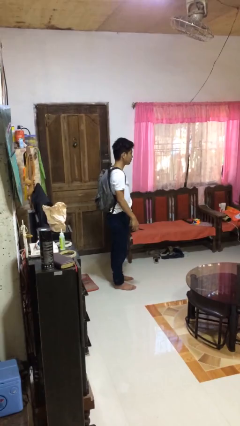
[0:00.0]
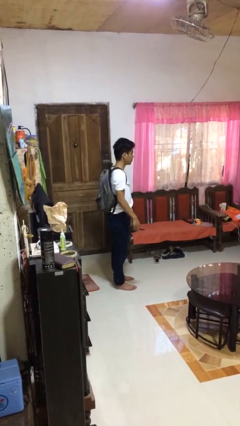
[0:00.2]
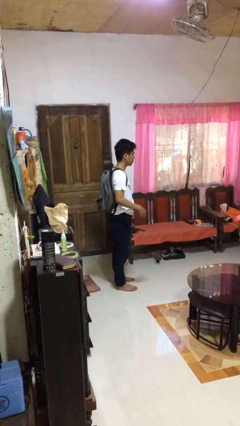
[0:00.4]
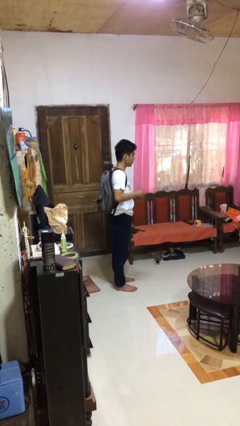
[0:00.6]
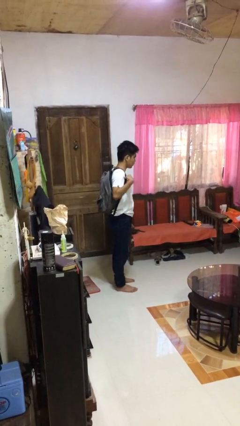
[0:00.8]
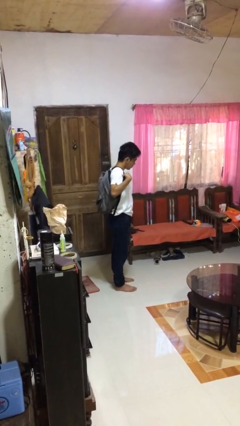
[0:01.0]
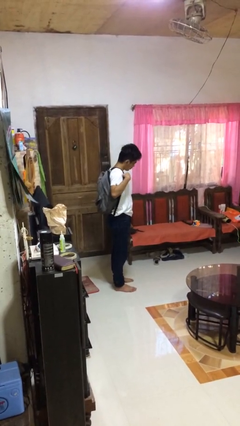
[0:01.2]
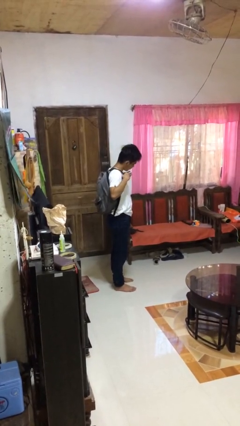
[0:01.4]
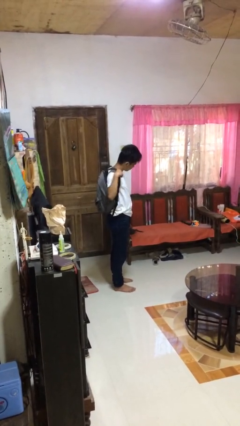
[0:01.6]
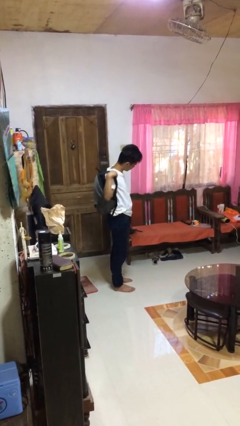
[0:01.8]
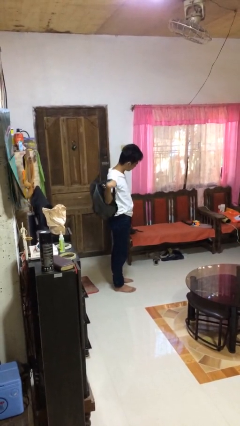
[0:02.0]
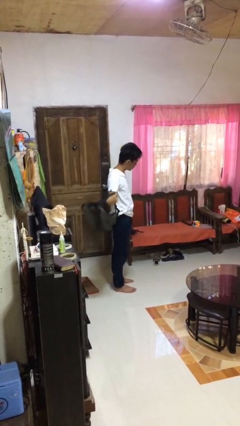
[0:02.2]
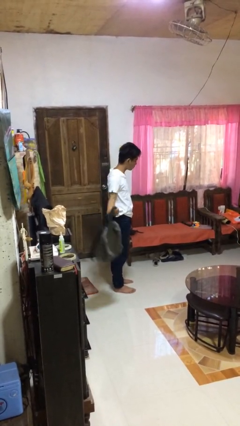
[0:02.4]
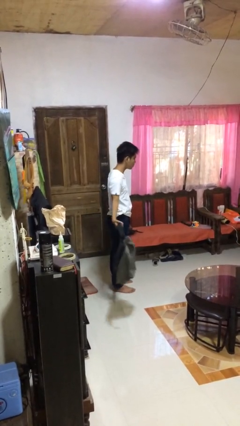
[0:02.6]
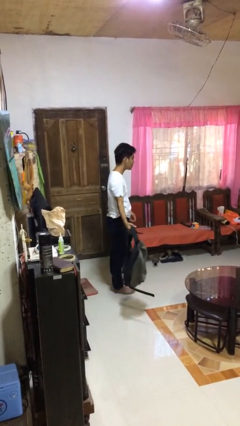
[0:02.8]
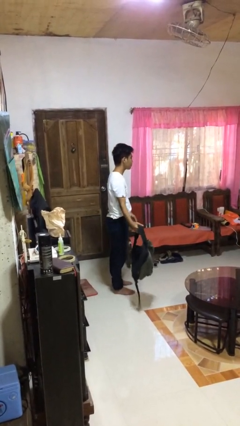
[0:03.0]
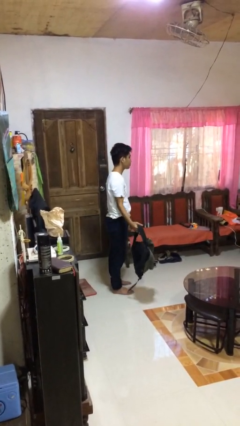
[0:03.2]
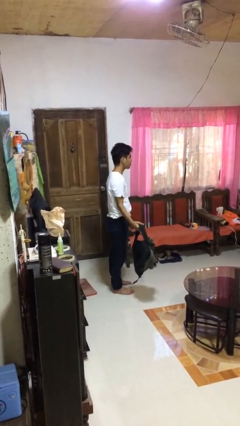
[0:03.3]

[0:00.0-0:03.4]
person takes off backpack

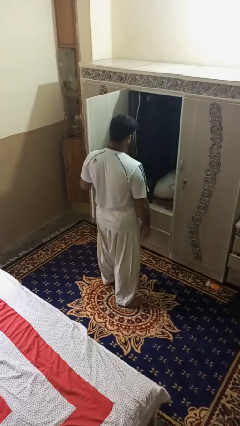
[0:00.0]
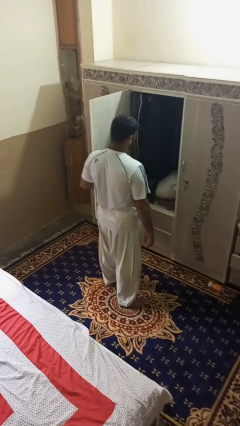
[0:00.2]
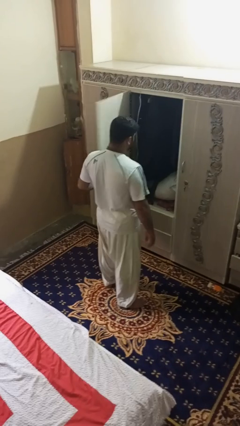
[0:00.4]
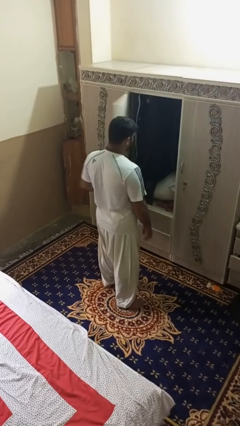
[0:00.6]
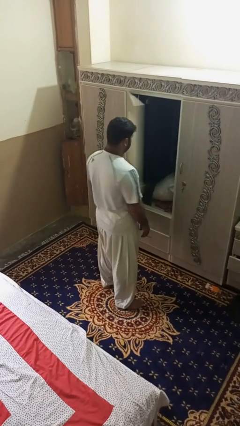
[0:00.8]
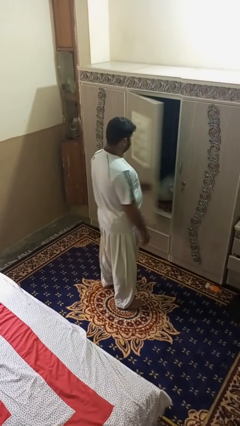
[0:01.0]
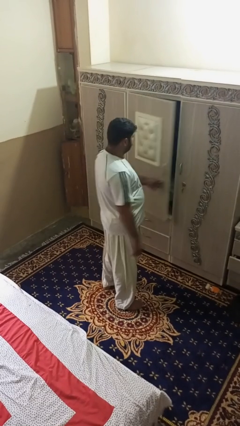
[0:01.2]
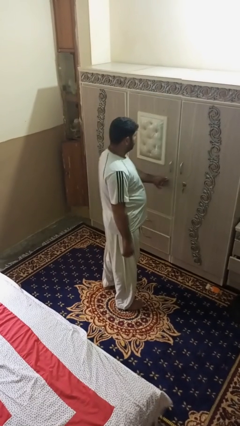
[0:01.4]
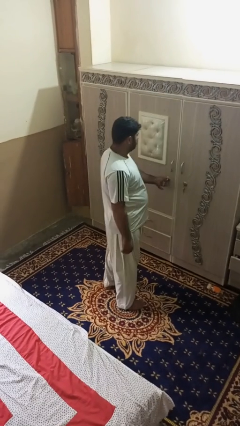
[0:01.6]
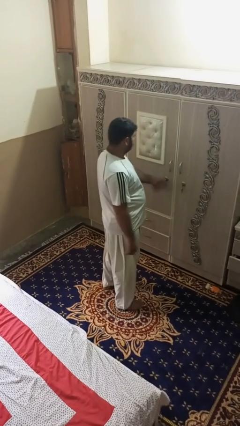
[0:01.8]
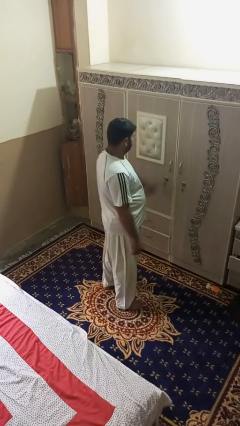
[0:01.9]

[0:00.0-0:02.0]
person closes dresser drawer

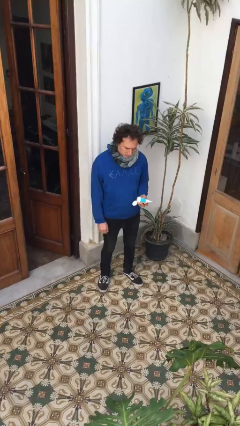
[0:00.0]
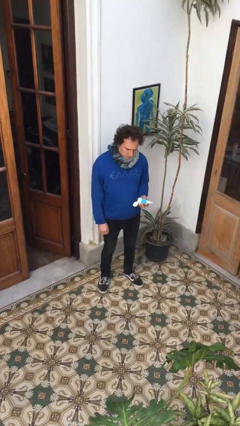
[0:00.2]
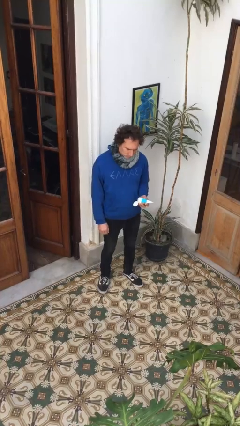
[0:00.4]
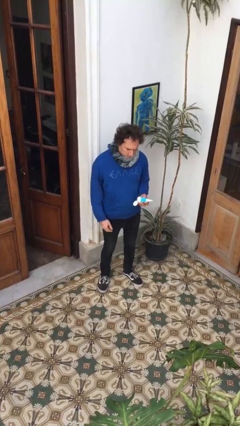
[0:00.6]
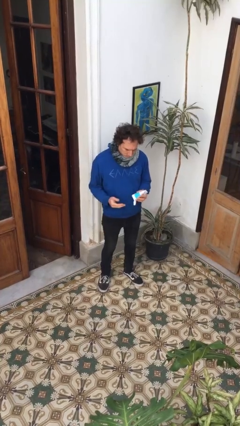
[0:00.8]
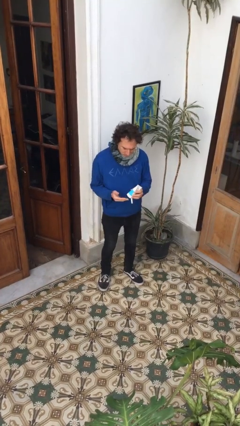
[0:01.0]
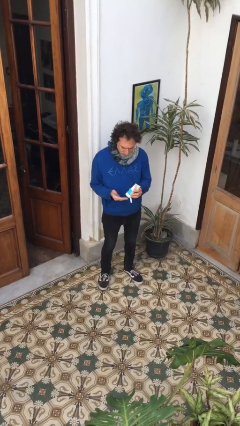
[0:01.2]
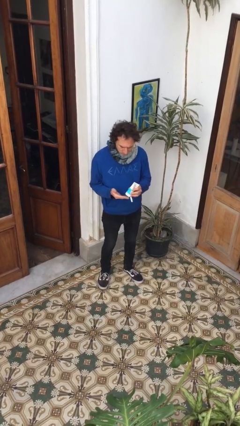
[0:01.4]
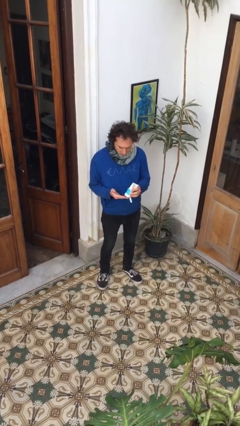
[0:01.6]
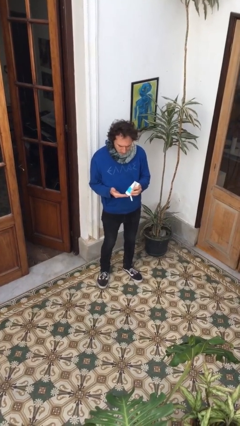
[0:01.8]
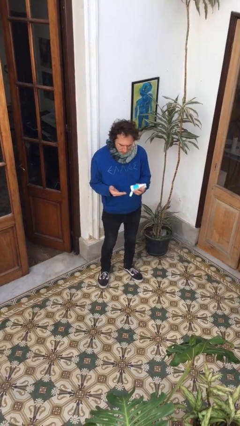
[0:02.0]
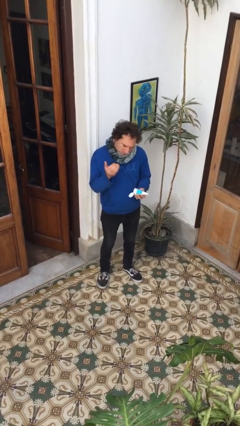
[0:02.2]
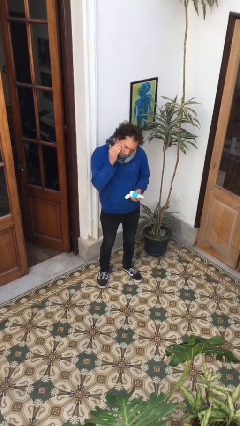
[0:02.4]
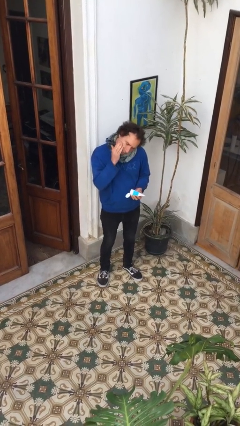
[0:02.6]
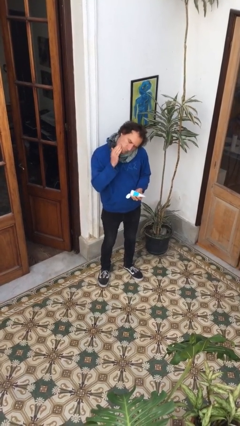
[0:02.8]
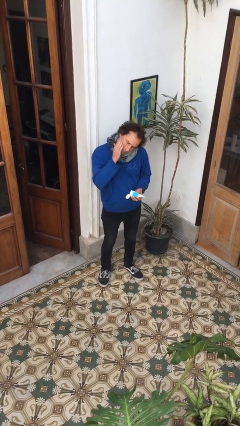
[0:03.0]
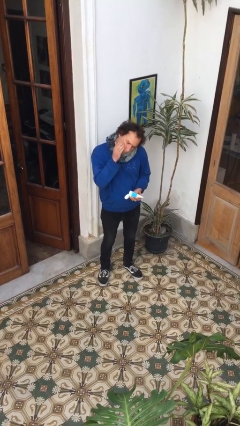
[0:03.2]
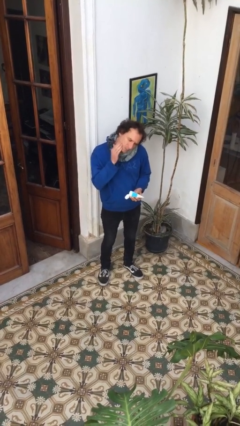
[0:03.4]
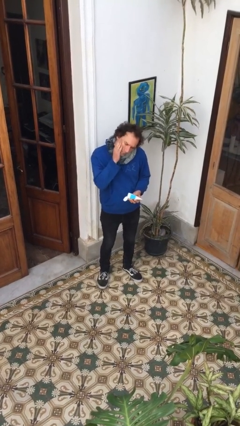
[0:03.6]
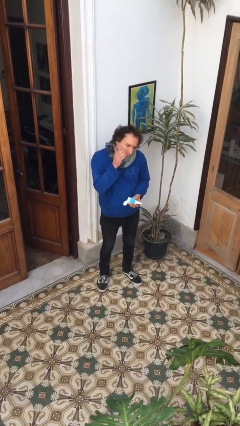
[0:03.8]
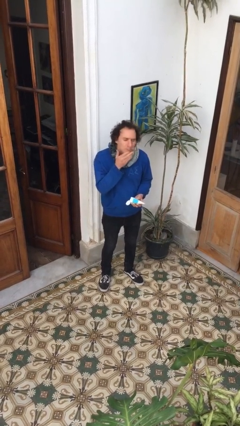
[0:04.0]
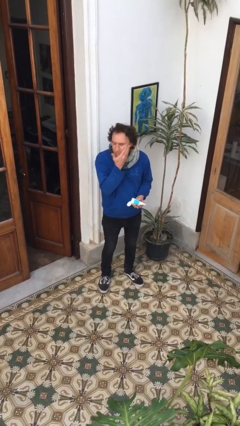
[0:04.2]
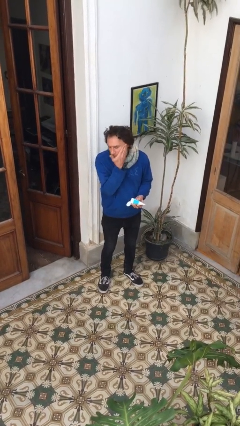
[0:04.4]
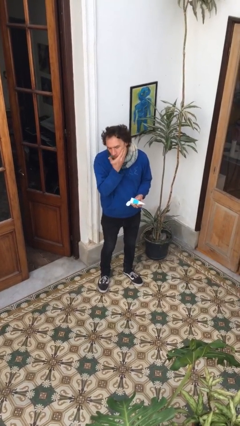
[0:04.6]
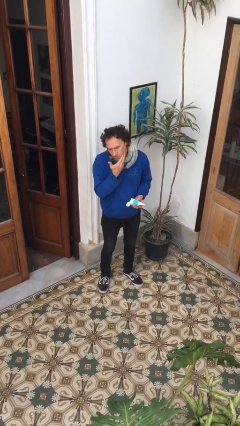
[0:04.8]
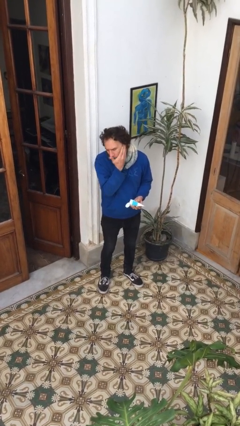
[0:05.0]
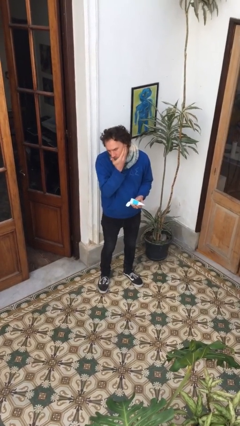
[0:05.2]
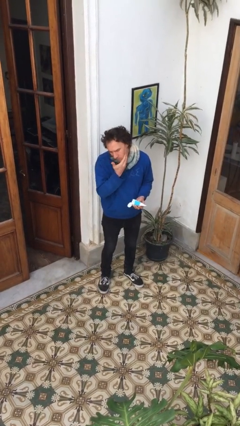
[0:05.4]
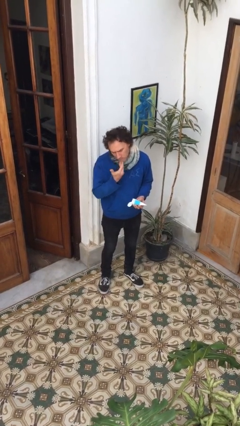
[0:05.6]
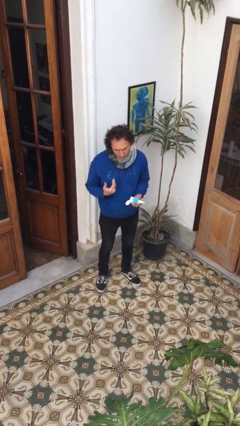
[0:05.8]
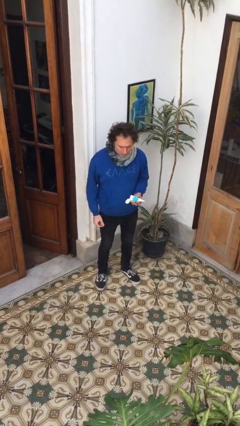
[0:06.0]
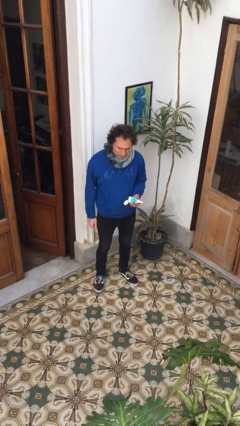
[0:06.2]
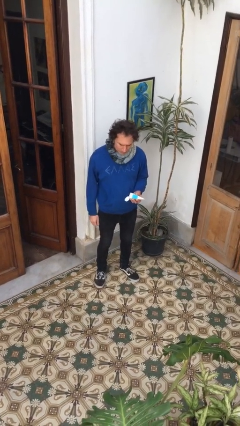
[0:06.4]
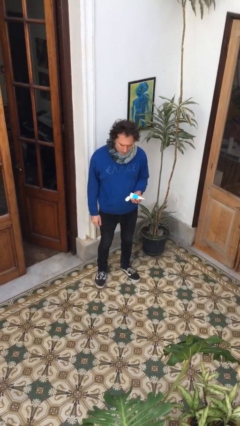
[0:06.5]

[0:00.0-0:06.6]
person applies facial moisturizer

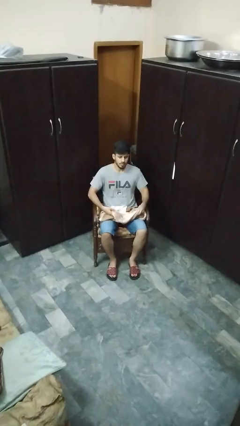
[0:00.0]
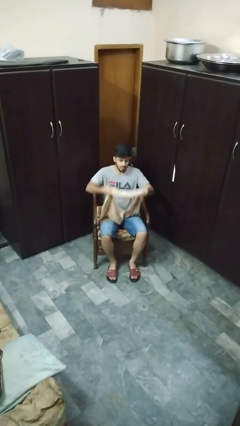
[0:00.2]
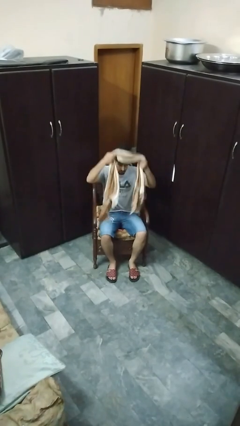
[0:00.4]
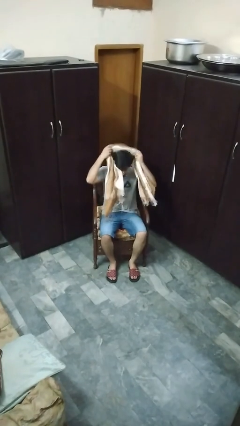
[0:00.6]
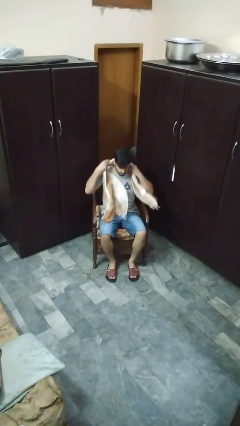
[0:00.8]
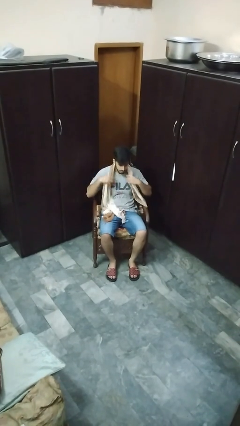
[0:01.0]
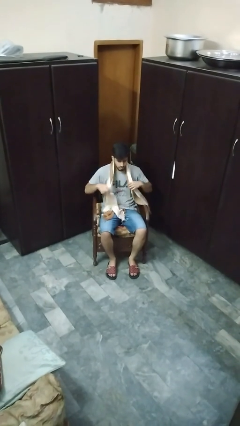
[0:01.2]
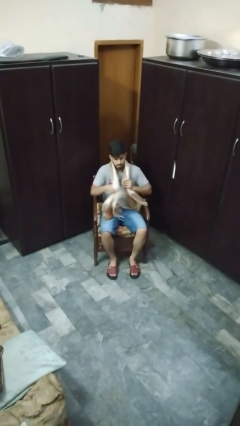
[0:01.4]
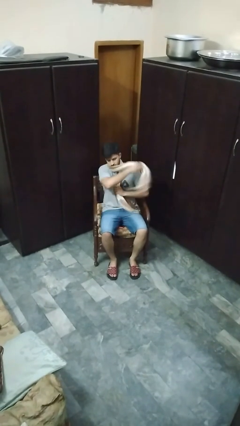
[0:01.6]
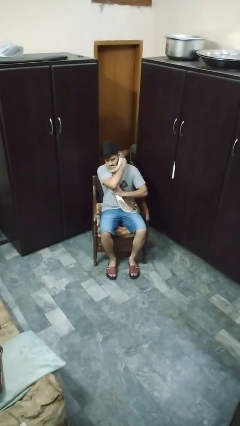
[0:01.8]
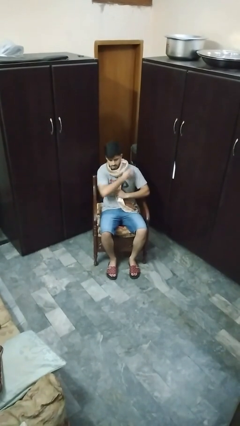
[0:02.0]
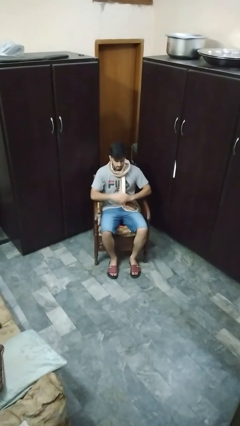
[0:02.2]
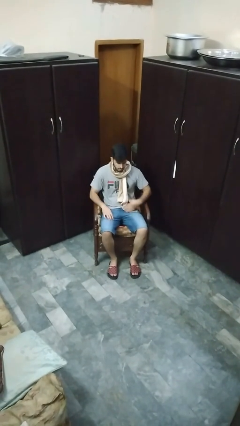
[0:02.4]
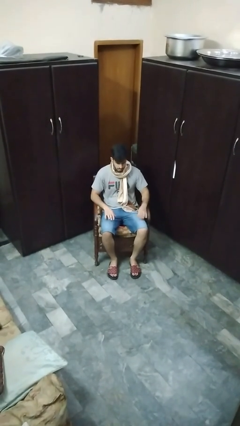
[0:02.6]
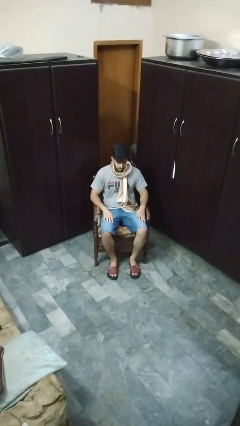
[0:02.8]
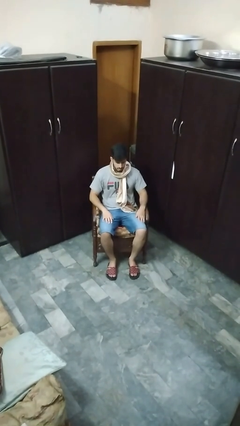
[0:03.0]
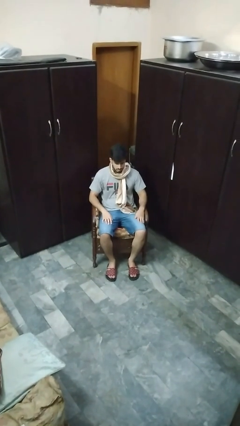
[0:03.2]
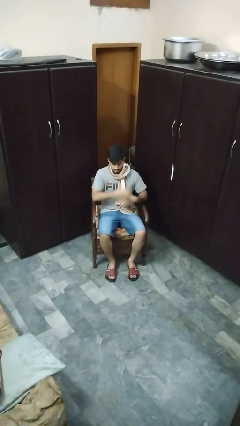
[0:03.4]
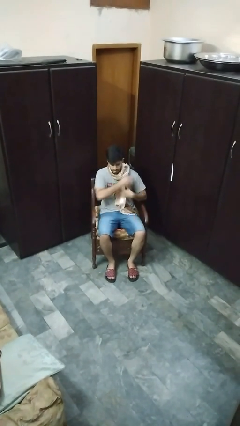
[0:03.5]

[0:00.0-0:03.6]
person puts on scarf

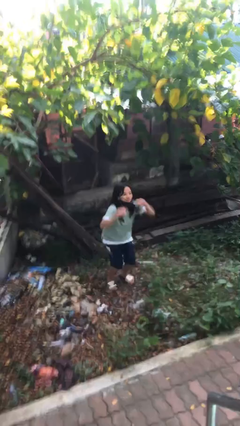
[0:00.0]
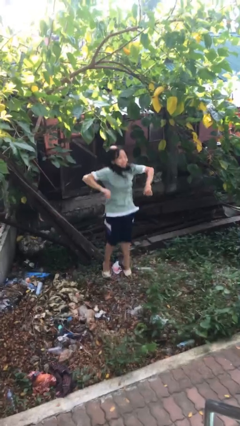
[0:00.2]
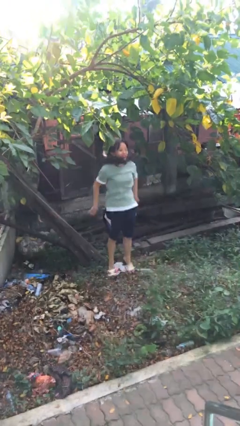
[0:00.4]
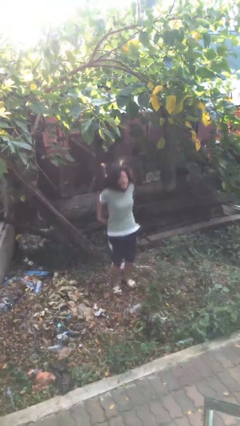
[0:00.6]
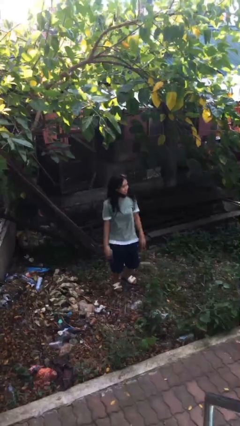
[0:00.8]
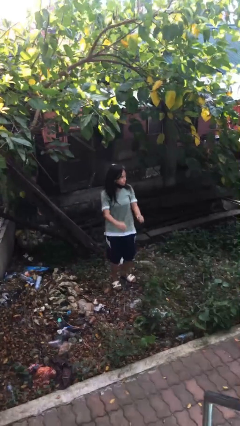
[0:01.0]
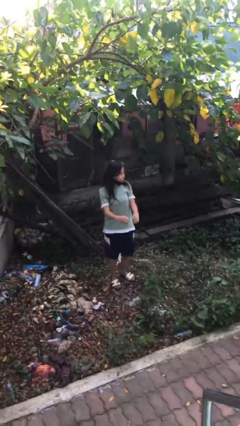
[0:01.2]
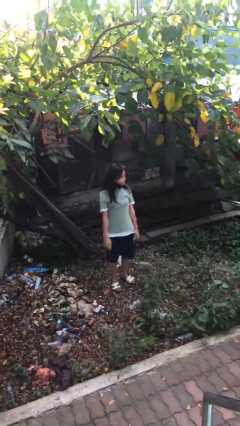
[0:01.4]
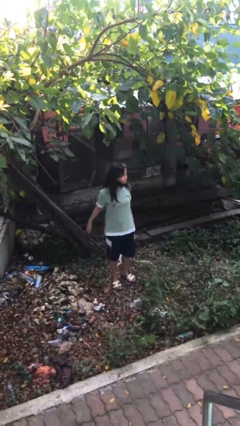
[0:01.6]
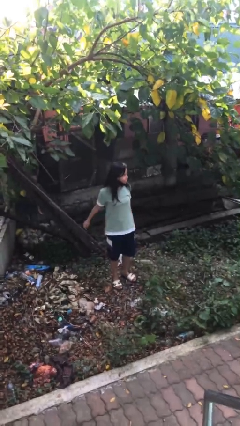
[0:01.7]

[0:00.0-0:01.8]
person jumps

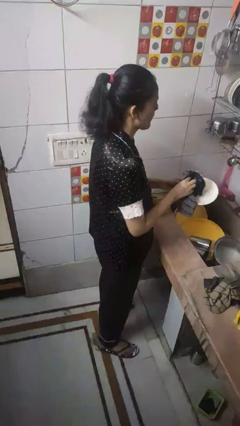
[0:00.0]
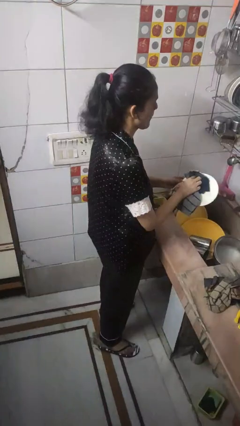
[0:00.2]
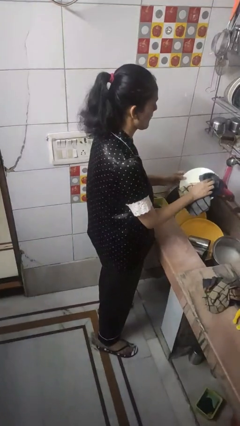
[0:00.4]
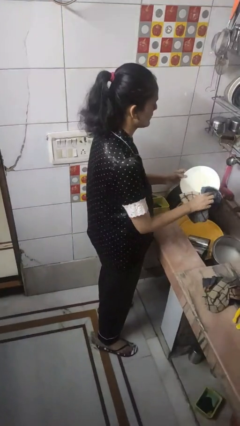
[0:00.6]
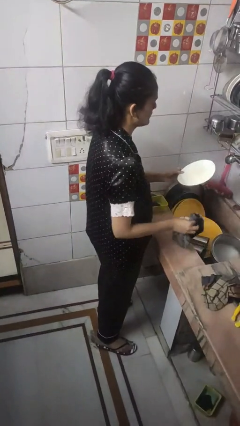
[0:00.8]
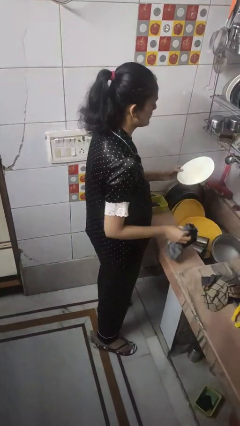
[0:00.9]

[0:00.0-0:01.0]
person dries dish
